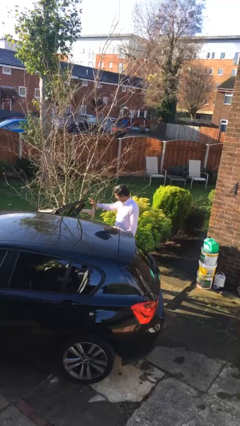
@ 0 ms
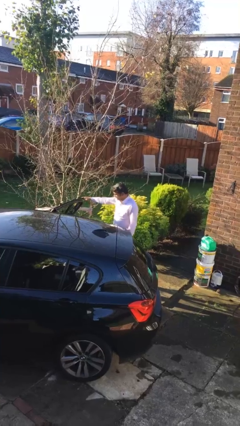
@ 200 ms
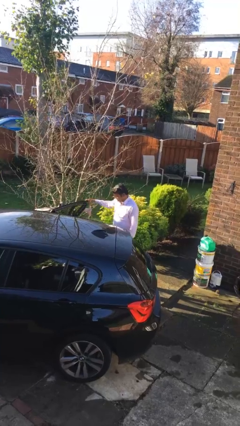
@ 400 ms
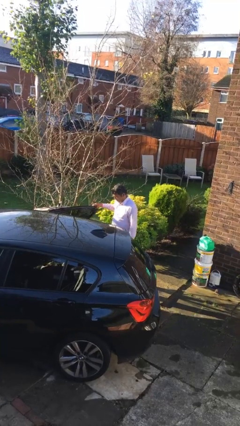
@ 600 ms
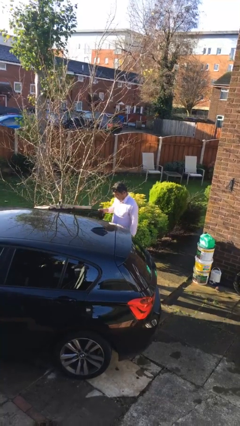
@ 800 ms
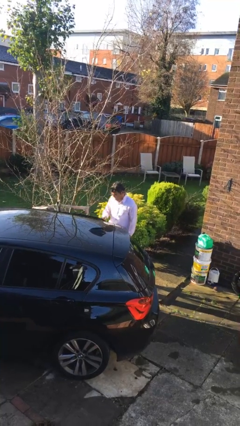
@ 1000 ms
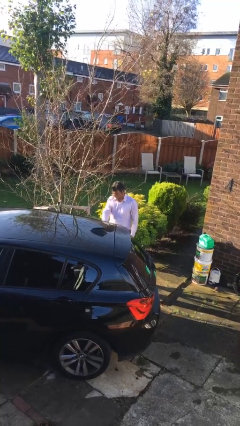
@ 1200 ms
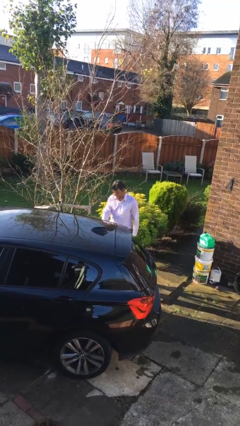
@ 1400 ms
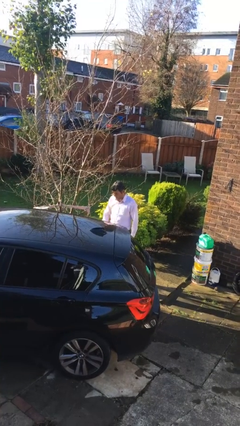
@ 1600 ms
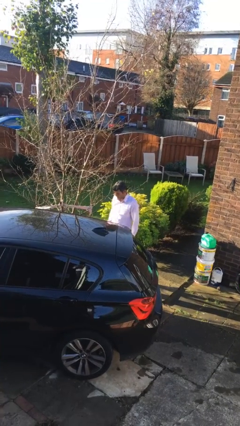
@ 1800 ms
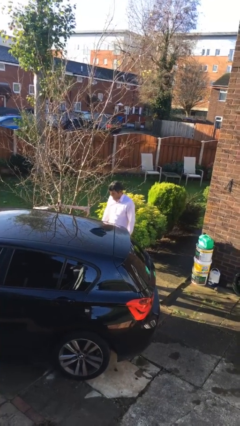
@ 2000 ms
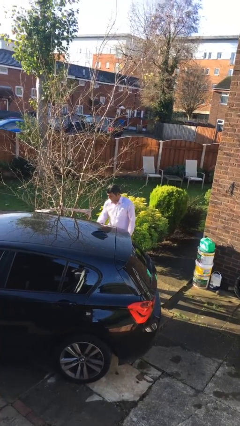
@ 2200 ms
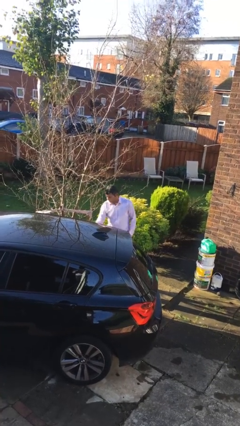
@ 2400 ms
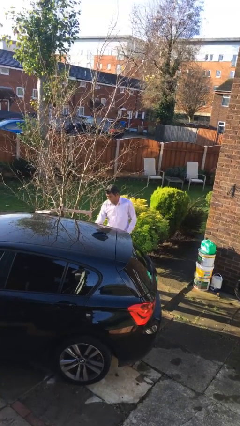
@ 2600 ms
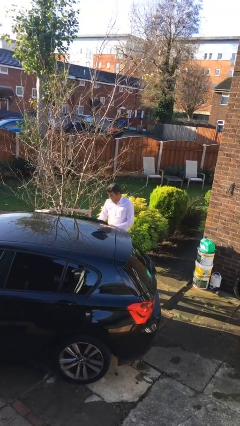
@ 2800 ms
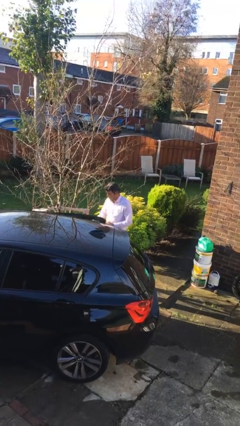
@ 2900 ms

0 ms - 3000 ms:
person closes car door

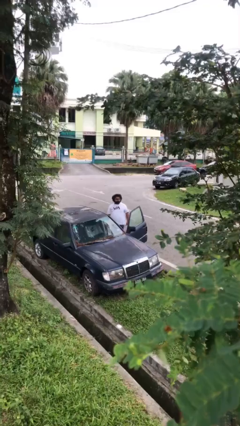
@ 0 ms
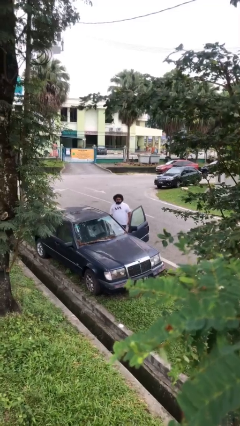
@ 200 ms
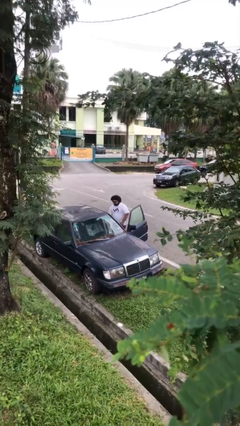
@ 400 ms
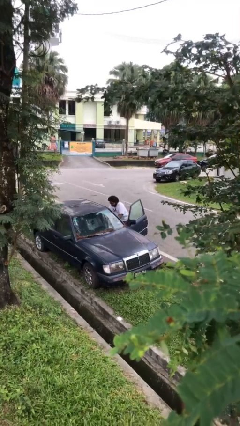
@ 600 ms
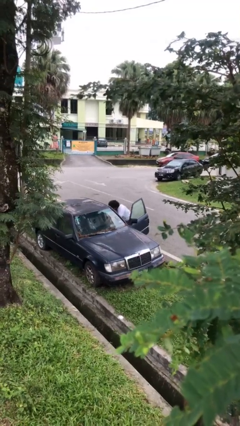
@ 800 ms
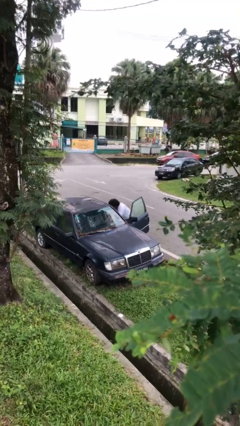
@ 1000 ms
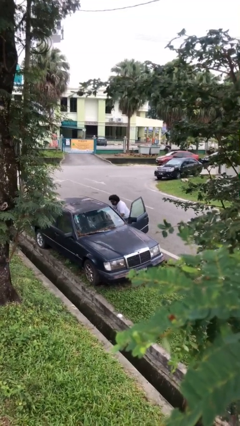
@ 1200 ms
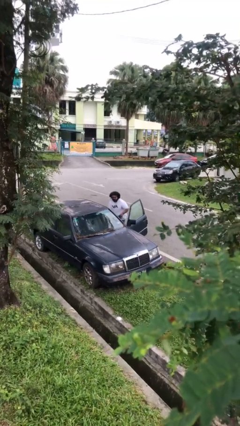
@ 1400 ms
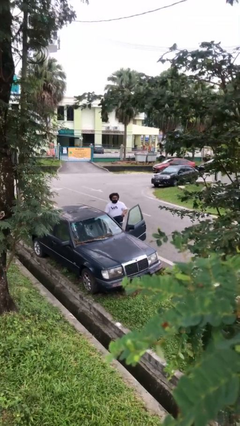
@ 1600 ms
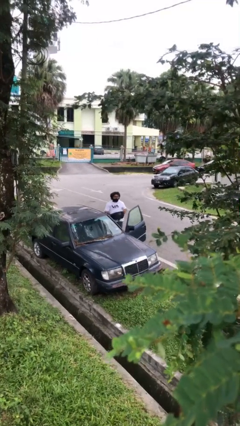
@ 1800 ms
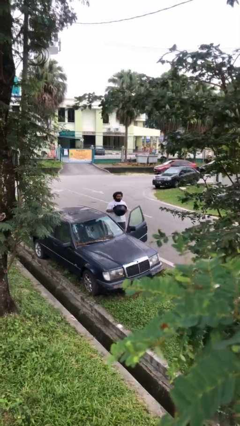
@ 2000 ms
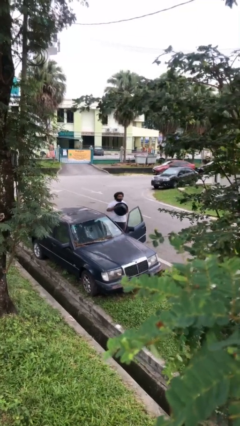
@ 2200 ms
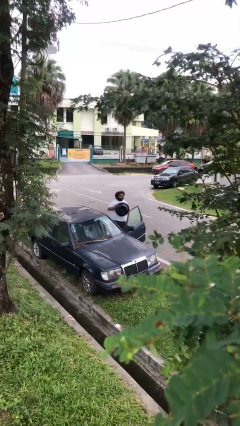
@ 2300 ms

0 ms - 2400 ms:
person unloads car

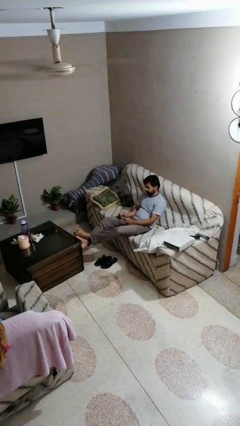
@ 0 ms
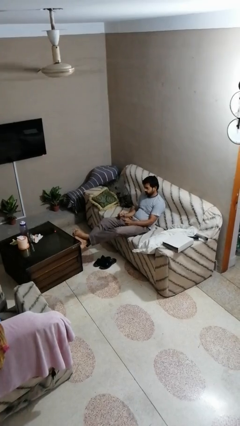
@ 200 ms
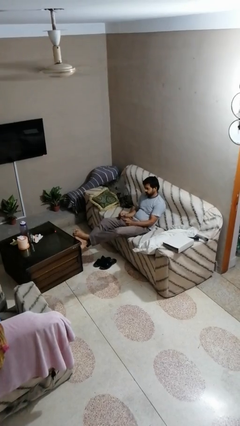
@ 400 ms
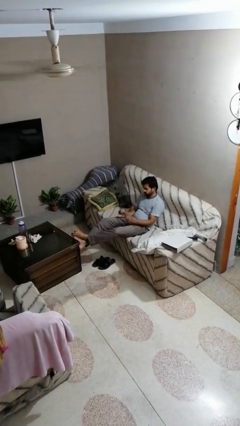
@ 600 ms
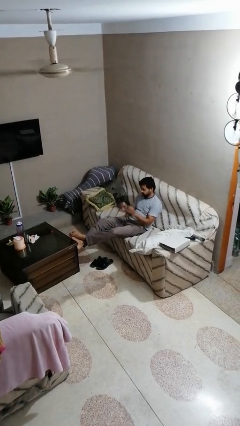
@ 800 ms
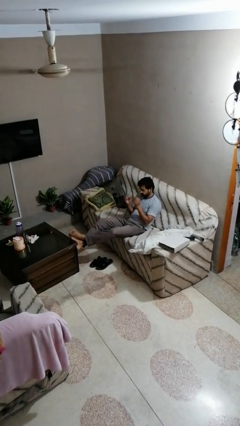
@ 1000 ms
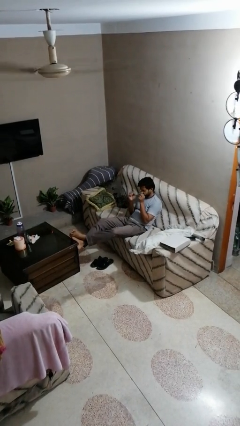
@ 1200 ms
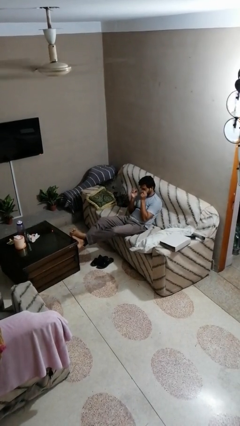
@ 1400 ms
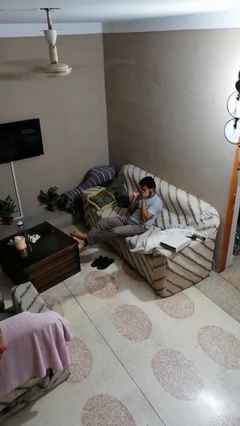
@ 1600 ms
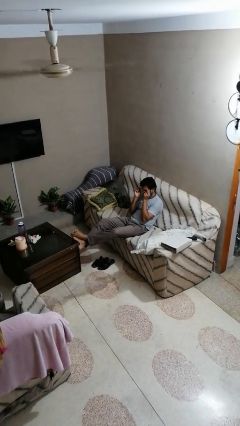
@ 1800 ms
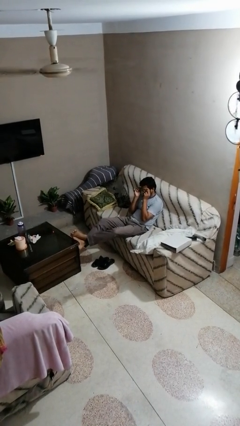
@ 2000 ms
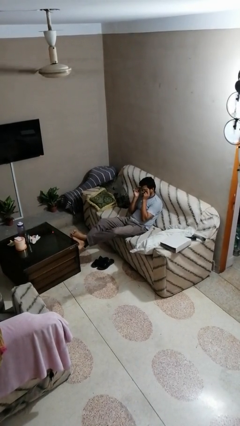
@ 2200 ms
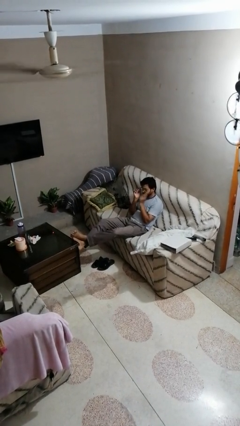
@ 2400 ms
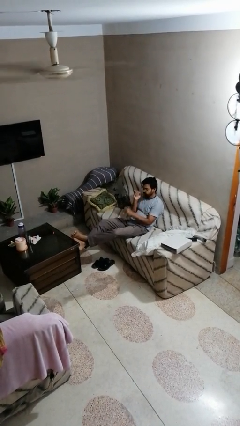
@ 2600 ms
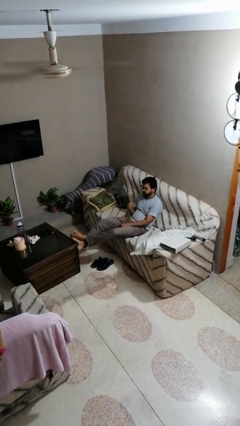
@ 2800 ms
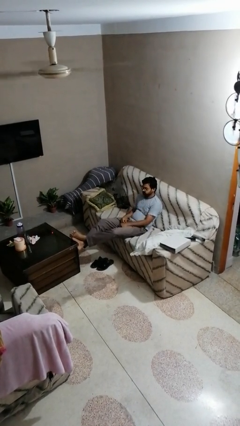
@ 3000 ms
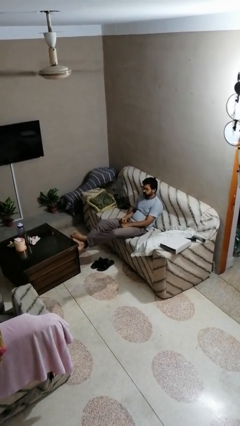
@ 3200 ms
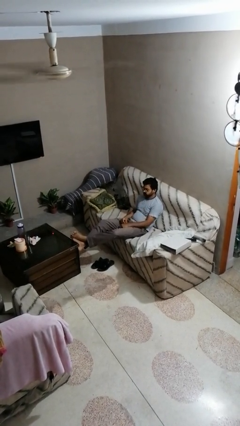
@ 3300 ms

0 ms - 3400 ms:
person puts on glasses

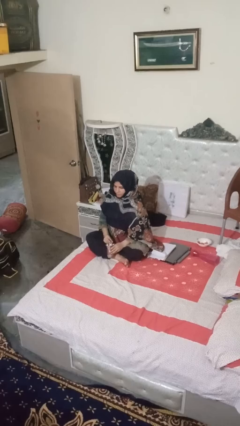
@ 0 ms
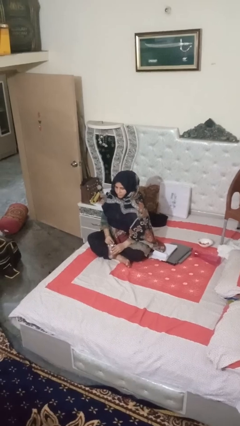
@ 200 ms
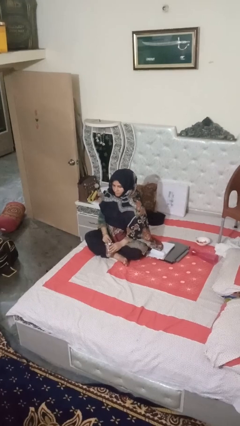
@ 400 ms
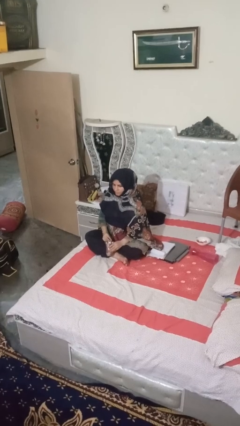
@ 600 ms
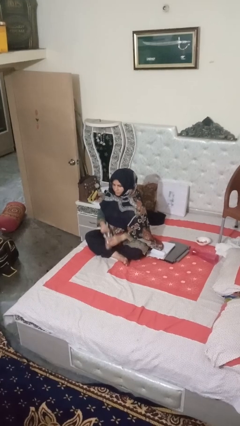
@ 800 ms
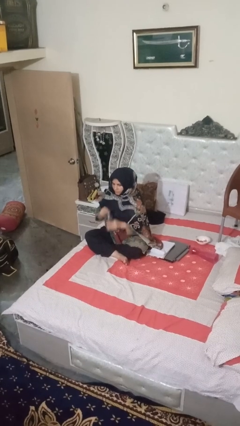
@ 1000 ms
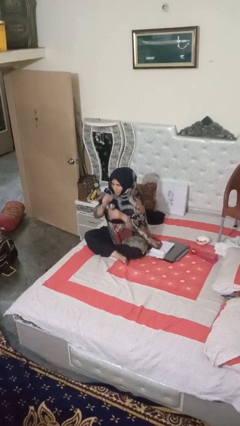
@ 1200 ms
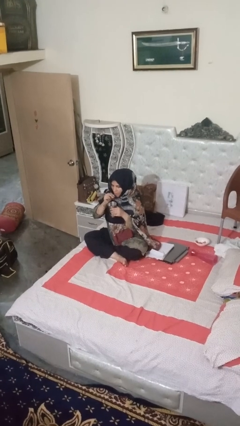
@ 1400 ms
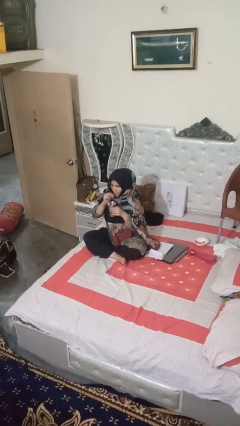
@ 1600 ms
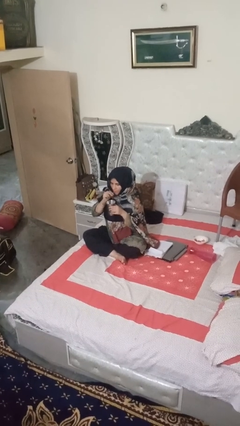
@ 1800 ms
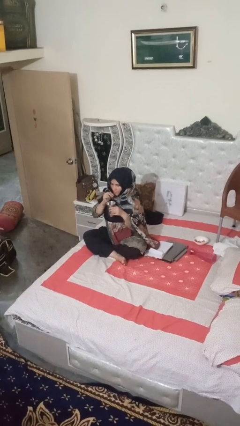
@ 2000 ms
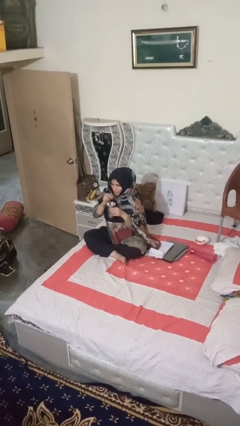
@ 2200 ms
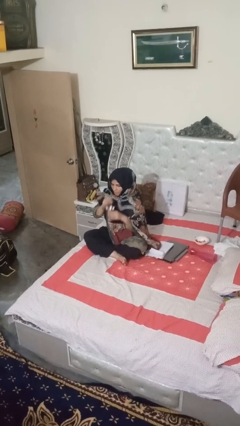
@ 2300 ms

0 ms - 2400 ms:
person drinks from straw

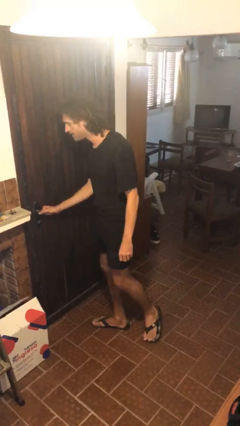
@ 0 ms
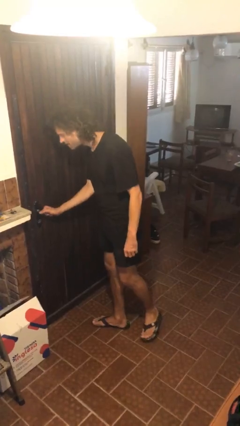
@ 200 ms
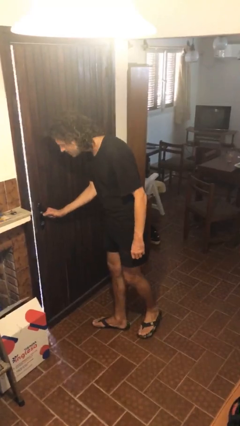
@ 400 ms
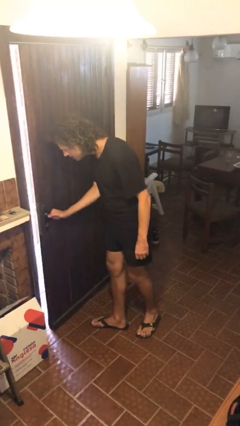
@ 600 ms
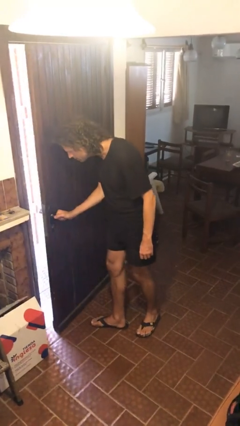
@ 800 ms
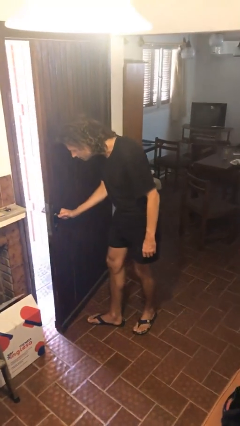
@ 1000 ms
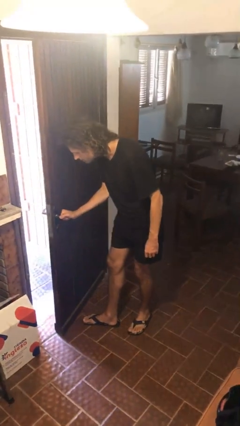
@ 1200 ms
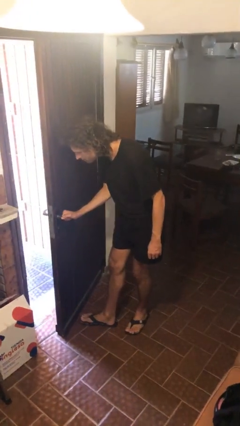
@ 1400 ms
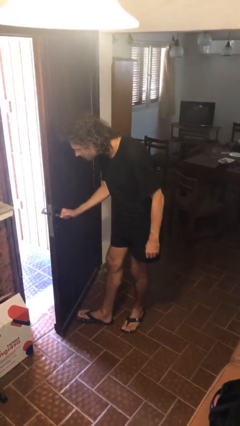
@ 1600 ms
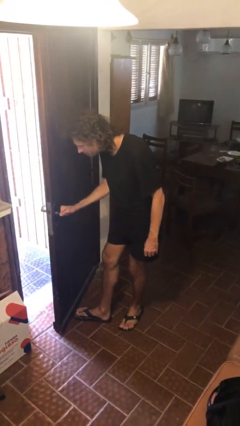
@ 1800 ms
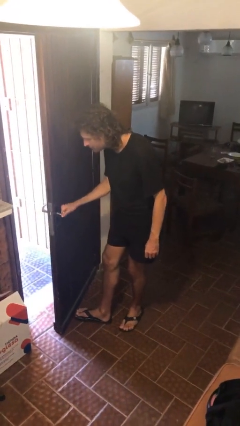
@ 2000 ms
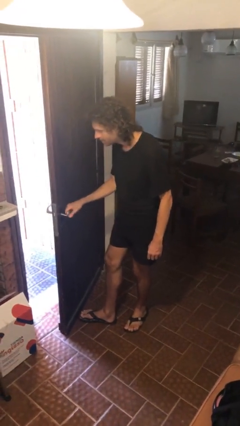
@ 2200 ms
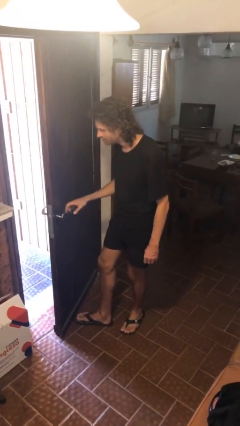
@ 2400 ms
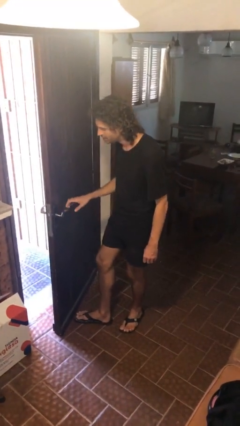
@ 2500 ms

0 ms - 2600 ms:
person opens facility door

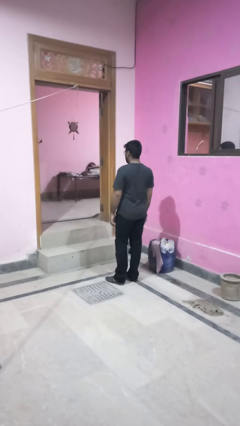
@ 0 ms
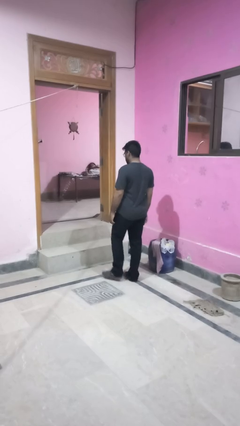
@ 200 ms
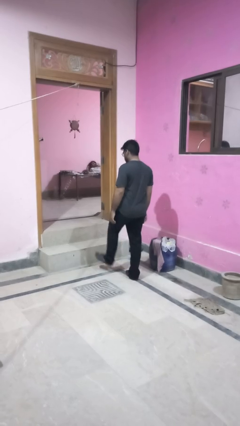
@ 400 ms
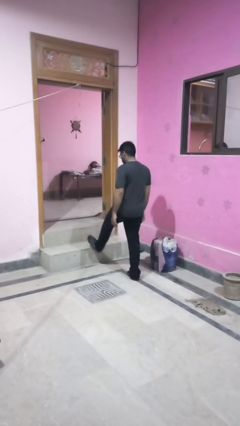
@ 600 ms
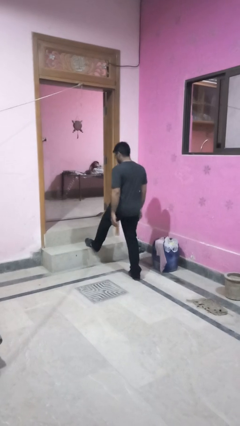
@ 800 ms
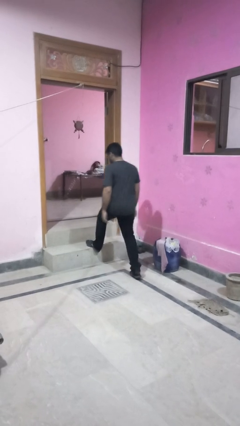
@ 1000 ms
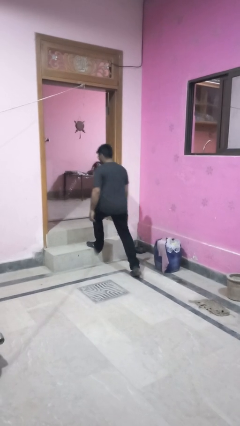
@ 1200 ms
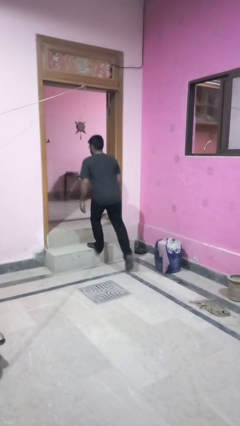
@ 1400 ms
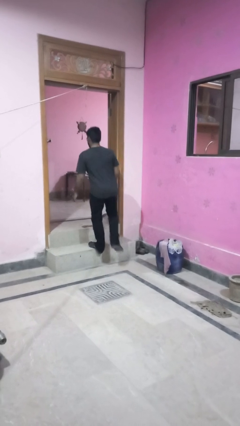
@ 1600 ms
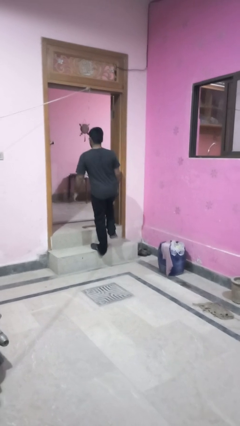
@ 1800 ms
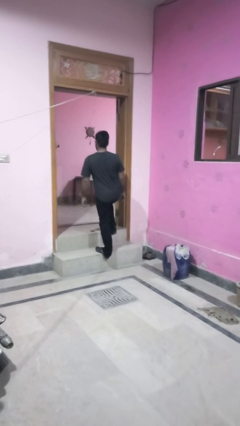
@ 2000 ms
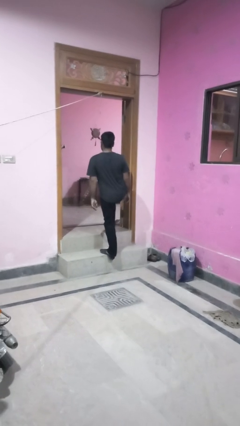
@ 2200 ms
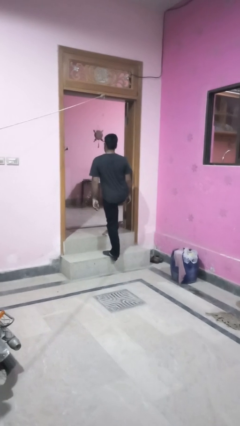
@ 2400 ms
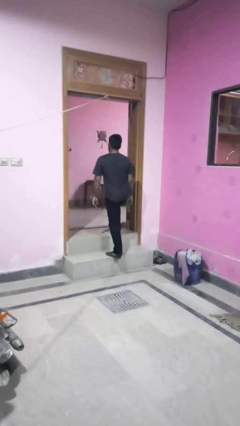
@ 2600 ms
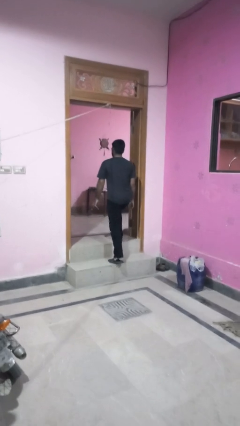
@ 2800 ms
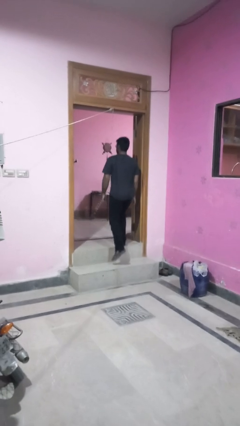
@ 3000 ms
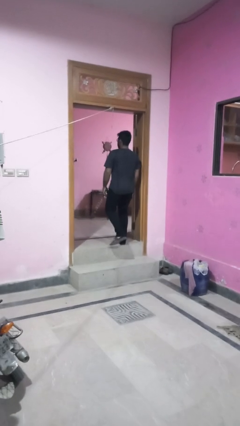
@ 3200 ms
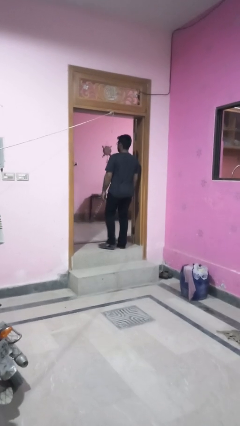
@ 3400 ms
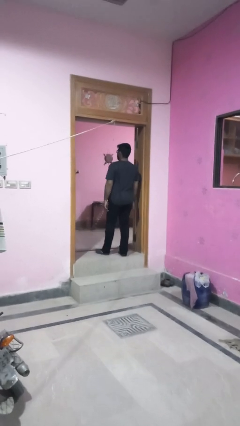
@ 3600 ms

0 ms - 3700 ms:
person puts on necklace

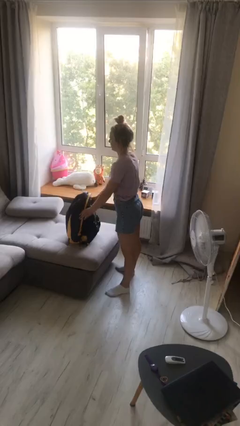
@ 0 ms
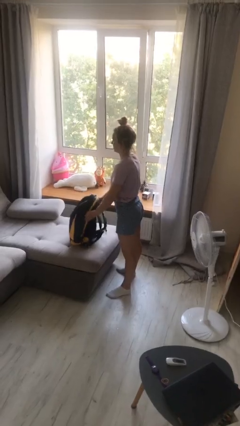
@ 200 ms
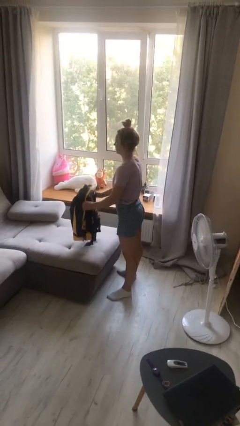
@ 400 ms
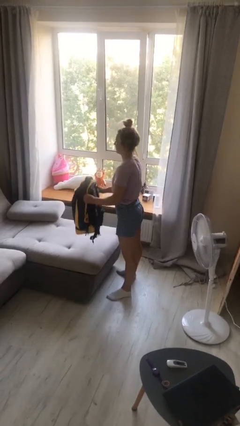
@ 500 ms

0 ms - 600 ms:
person picks up object from bed
